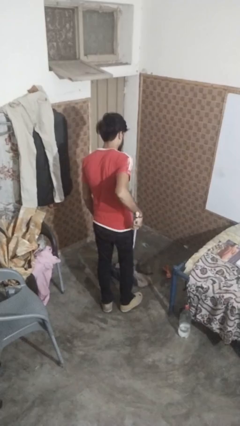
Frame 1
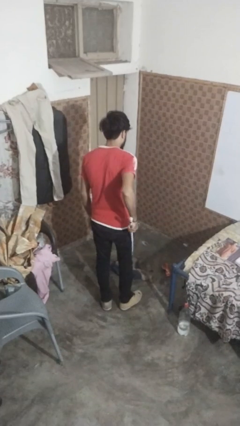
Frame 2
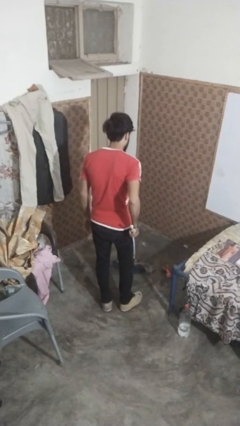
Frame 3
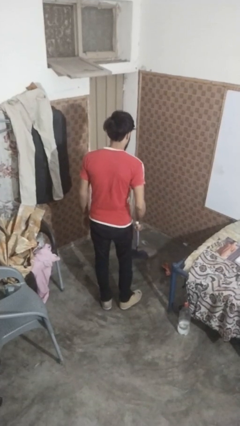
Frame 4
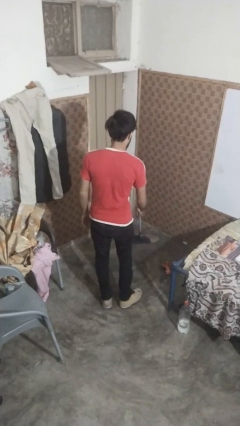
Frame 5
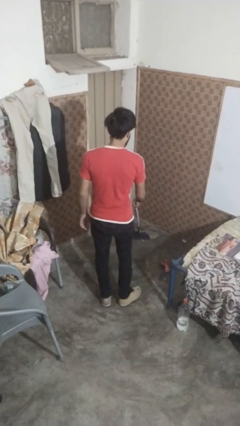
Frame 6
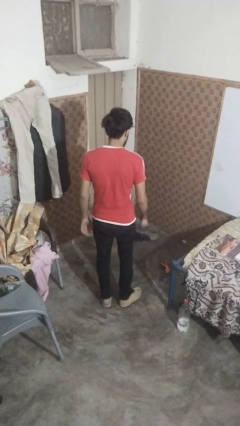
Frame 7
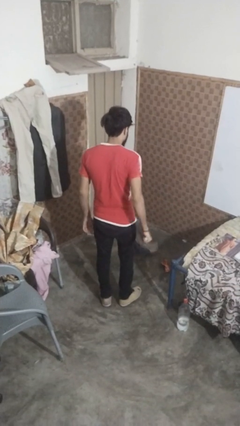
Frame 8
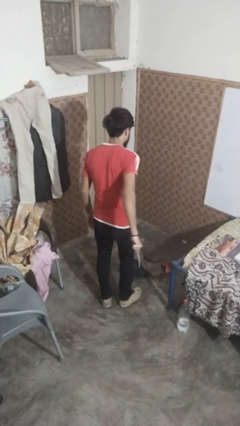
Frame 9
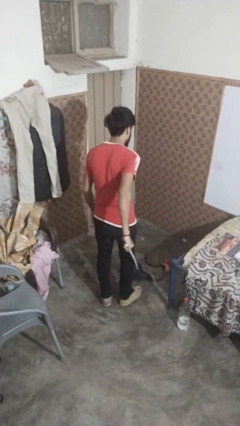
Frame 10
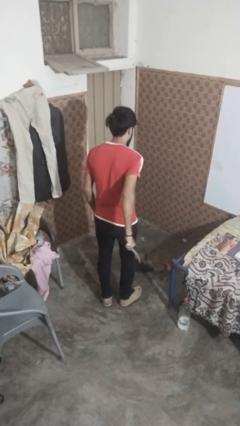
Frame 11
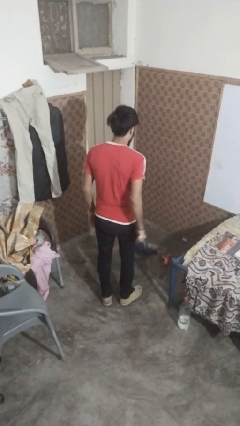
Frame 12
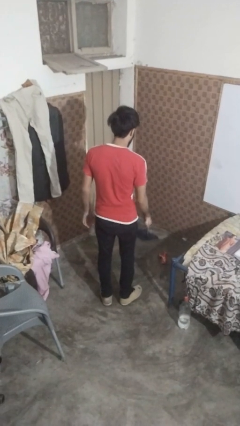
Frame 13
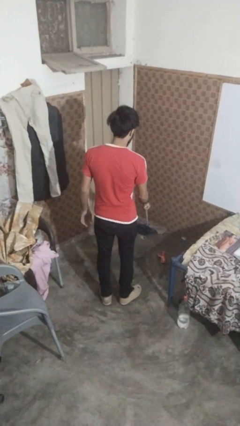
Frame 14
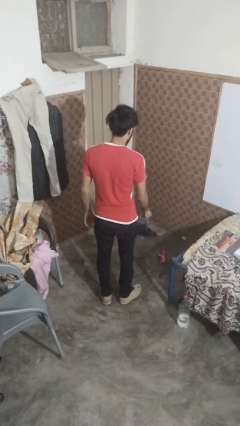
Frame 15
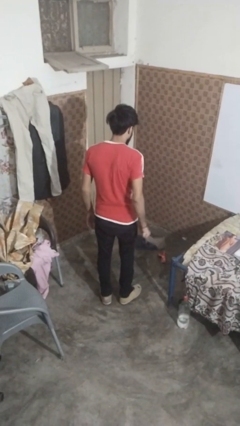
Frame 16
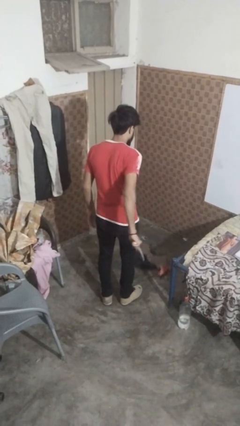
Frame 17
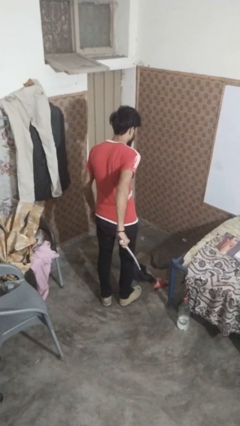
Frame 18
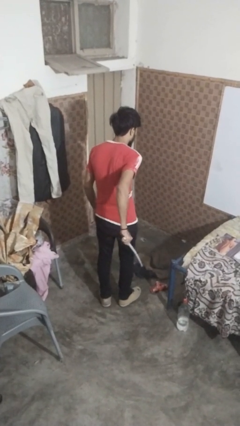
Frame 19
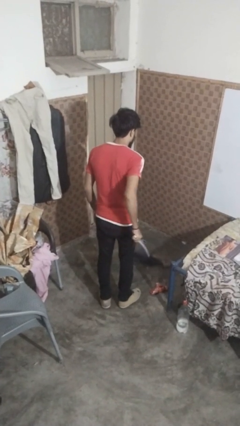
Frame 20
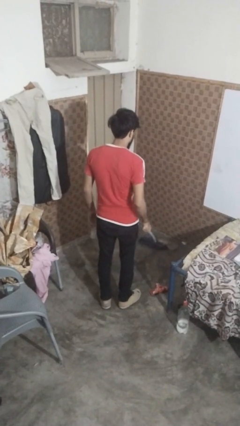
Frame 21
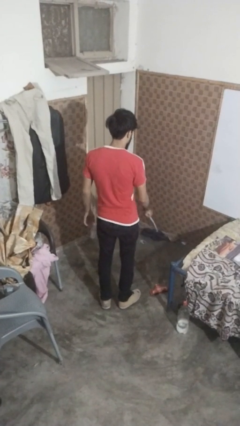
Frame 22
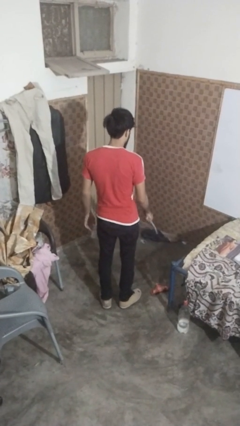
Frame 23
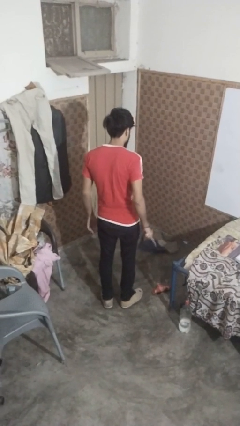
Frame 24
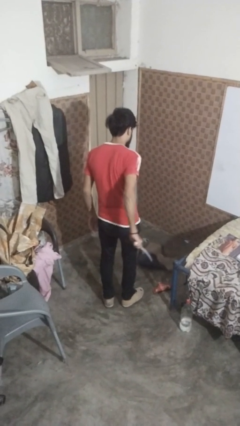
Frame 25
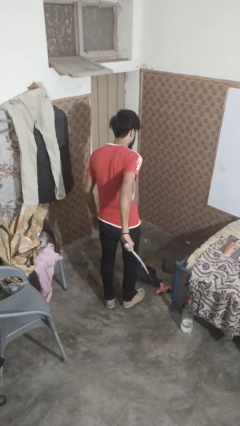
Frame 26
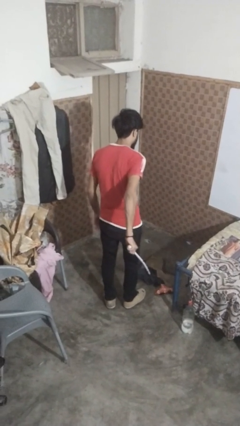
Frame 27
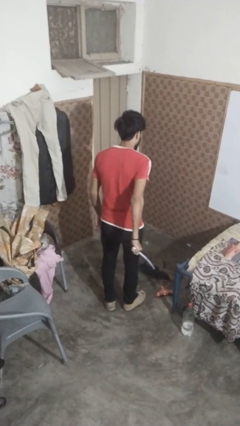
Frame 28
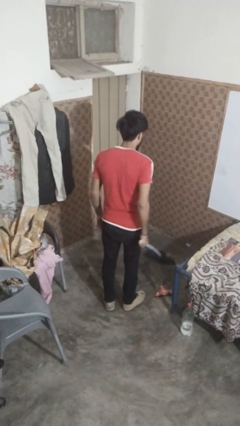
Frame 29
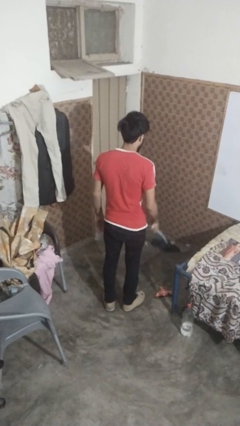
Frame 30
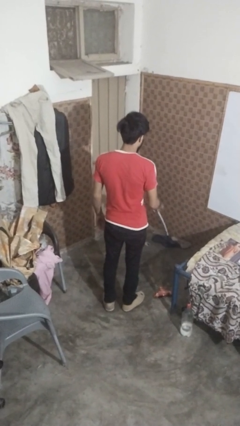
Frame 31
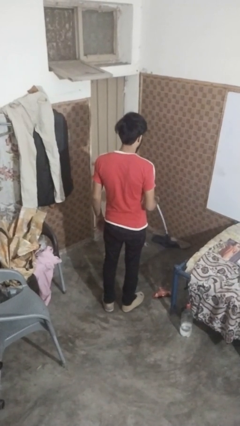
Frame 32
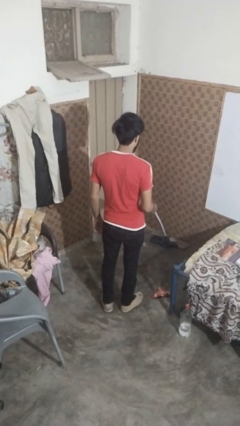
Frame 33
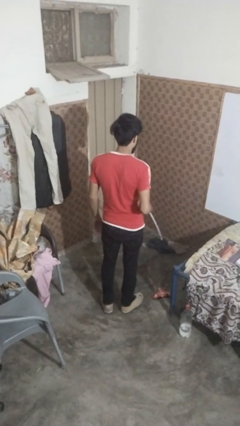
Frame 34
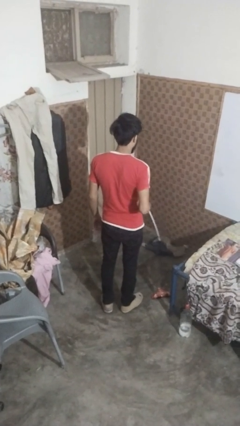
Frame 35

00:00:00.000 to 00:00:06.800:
person mops

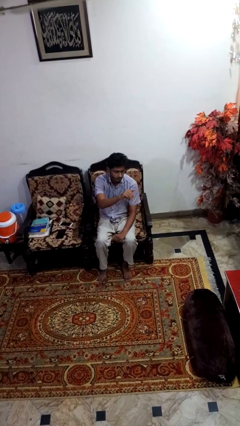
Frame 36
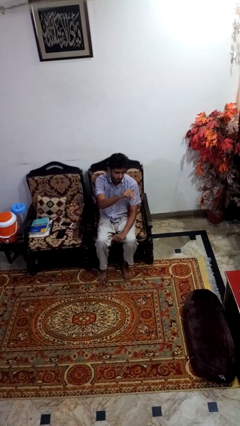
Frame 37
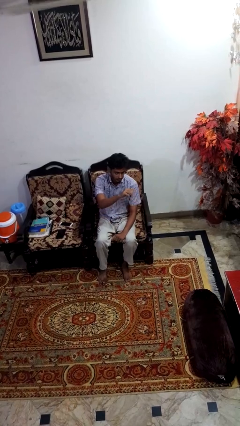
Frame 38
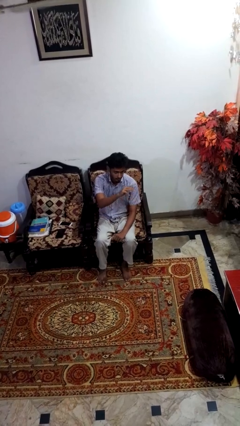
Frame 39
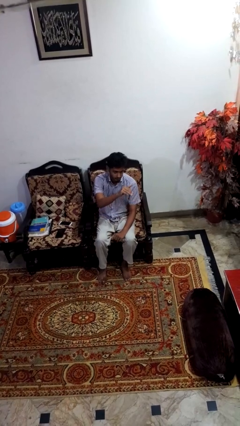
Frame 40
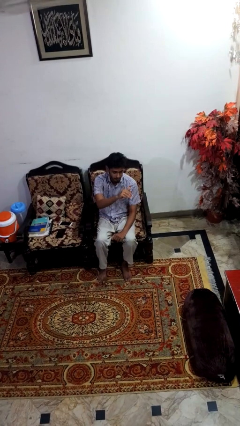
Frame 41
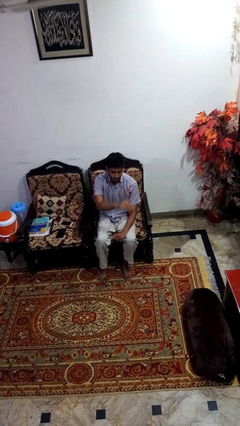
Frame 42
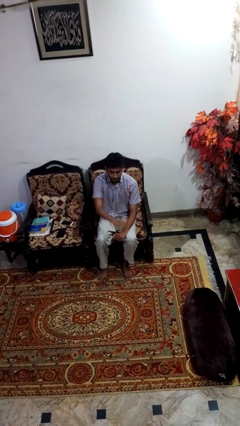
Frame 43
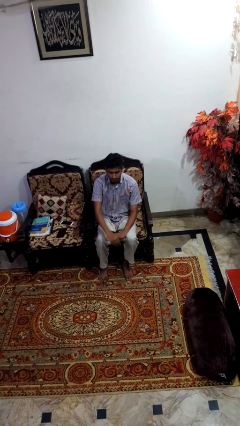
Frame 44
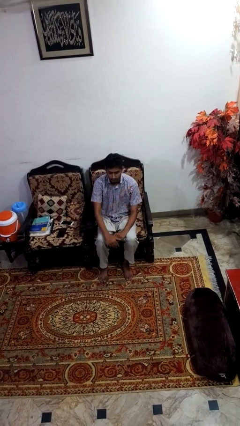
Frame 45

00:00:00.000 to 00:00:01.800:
person gestures come here

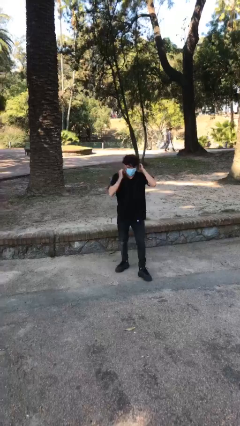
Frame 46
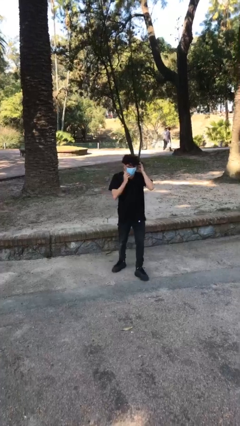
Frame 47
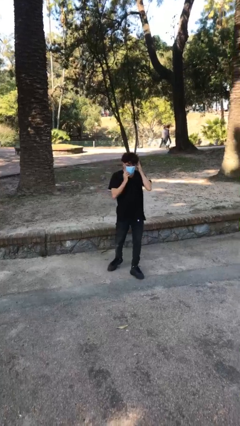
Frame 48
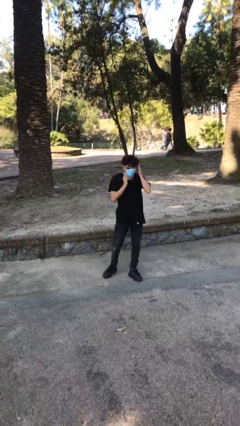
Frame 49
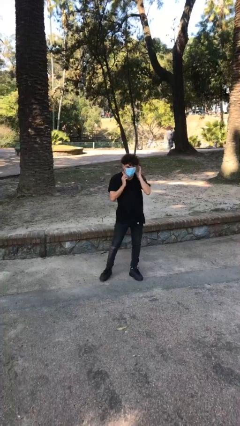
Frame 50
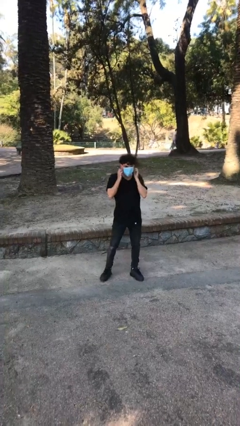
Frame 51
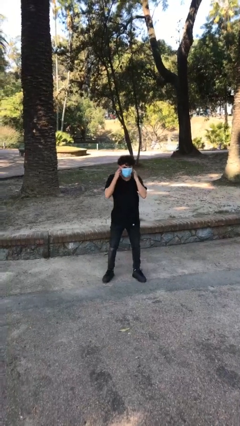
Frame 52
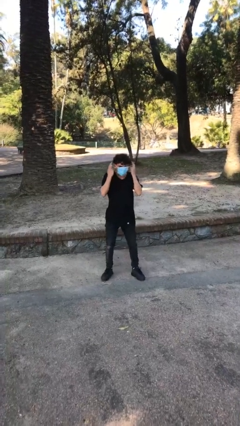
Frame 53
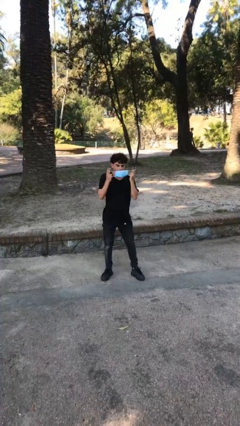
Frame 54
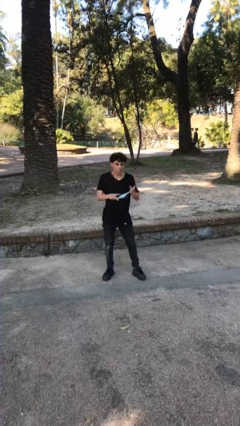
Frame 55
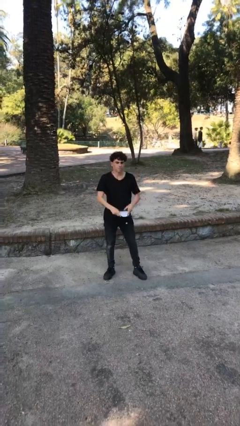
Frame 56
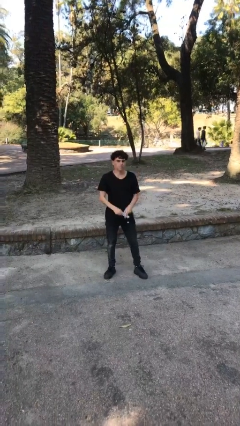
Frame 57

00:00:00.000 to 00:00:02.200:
person takes off facemask

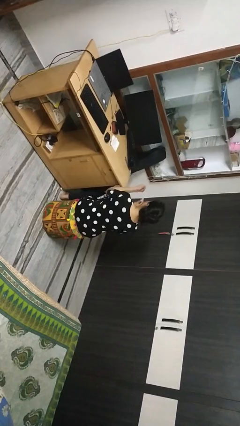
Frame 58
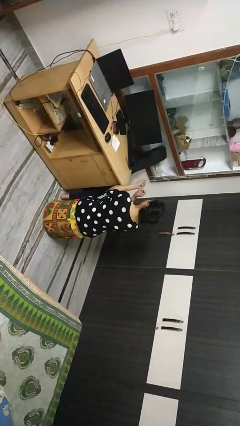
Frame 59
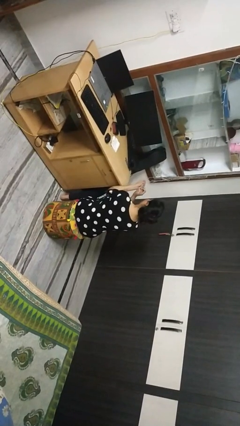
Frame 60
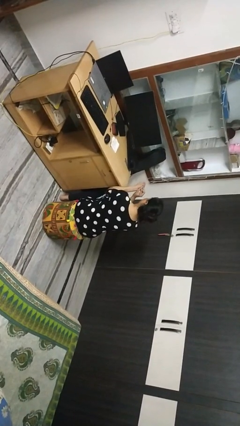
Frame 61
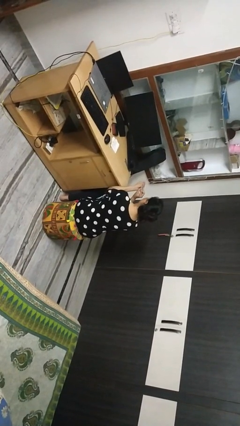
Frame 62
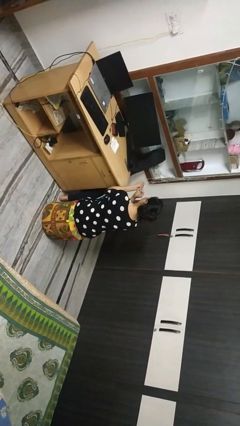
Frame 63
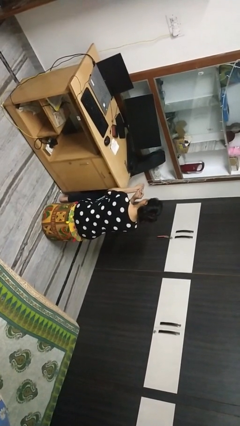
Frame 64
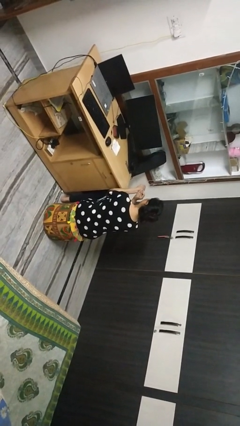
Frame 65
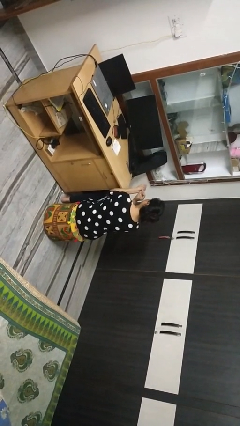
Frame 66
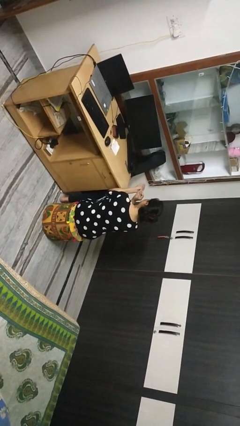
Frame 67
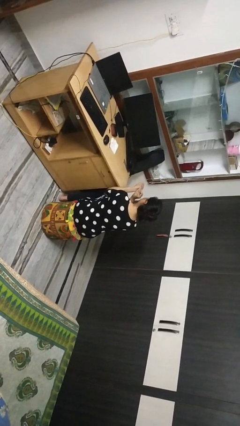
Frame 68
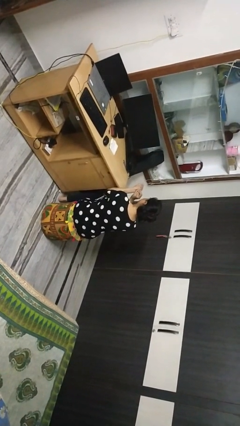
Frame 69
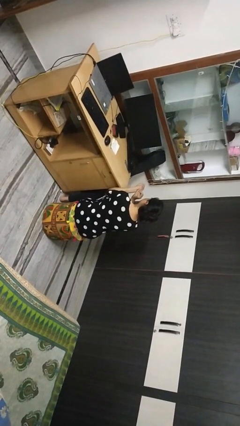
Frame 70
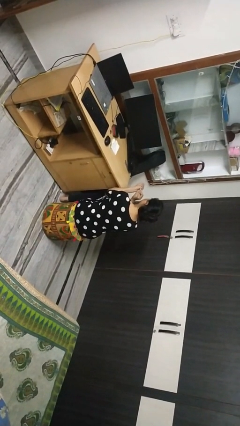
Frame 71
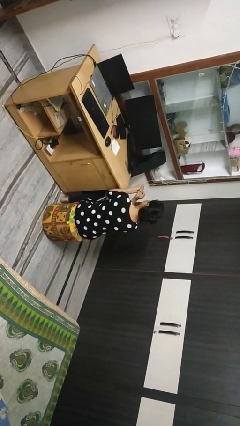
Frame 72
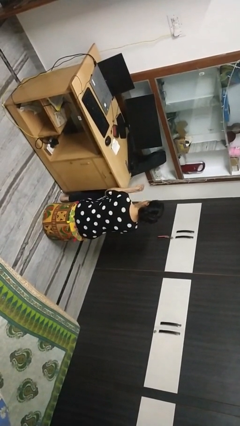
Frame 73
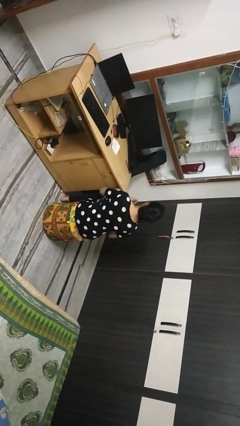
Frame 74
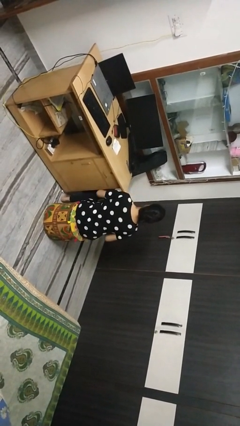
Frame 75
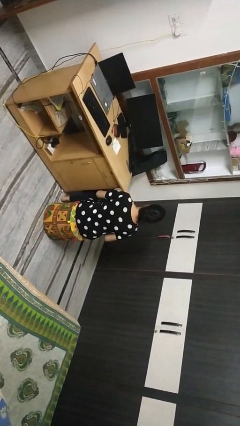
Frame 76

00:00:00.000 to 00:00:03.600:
person files fingernails

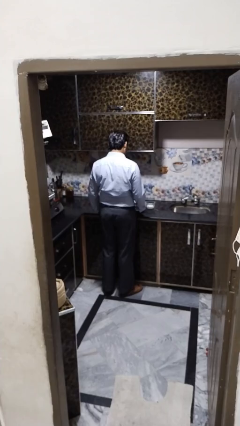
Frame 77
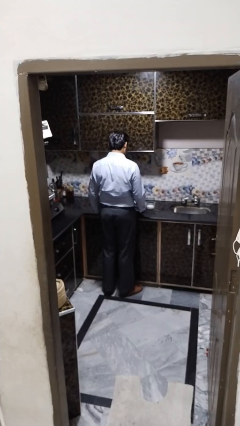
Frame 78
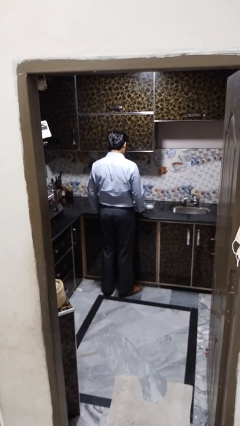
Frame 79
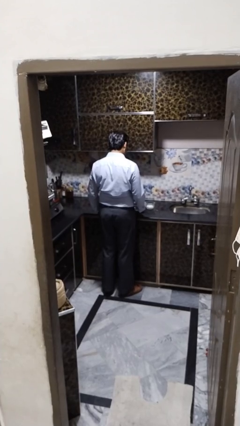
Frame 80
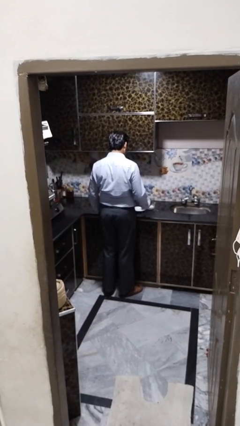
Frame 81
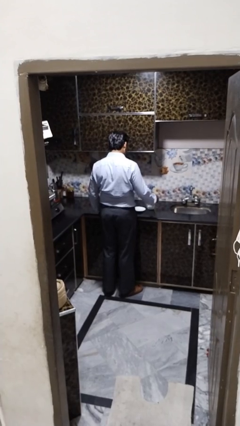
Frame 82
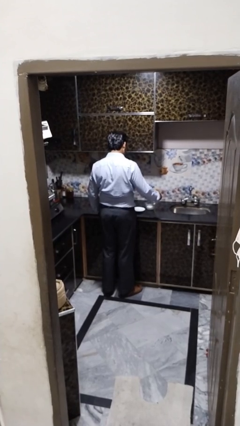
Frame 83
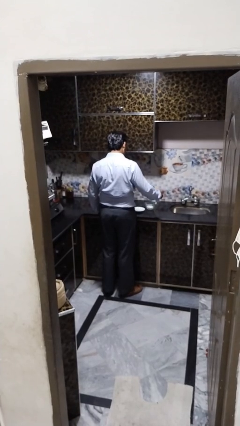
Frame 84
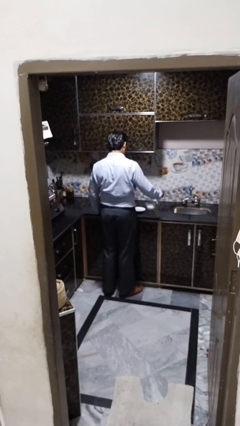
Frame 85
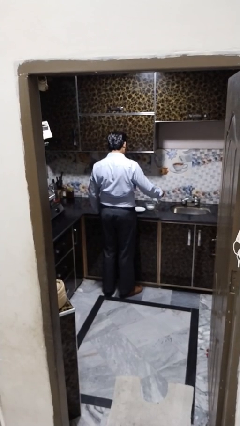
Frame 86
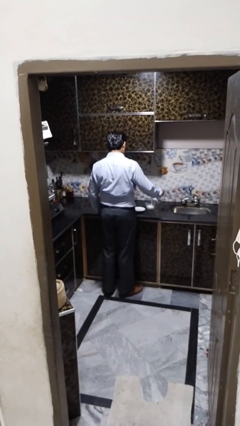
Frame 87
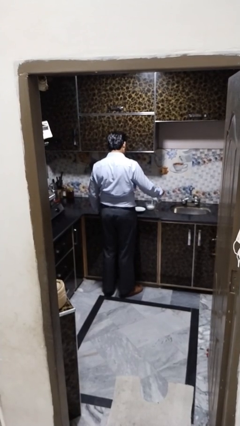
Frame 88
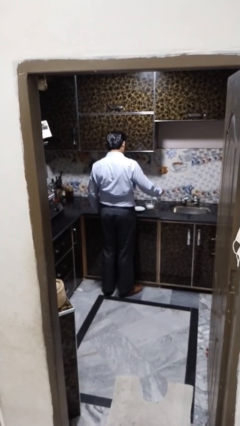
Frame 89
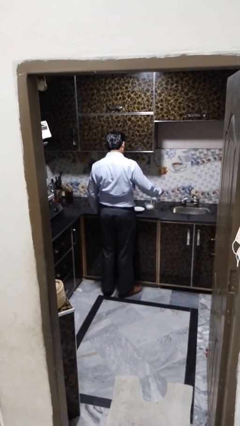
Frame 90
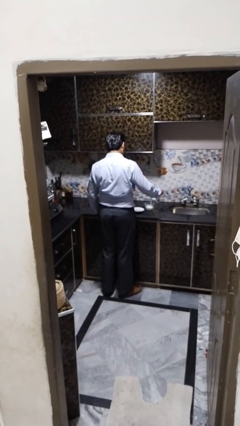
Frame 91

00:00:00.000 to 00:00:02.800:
person pours into bowl

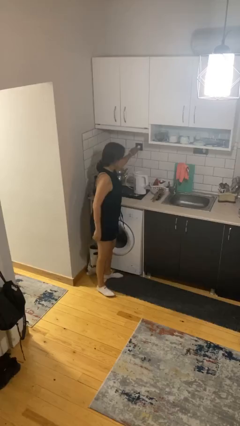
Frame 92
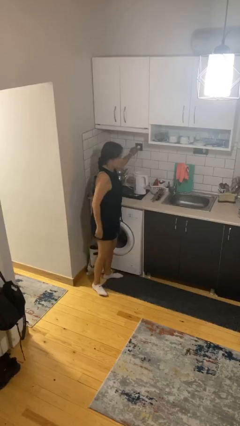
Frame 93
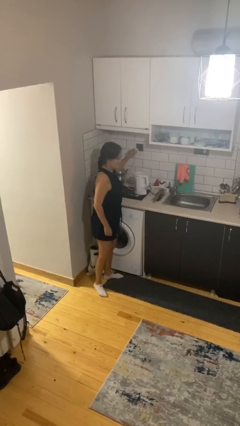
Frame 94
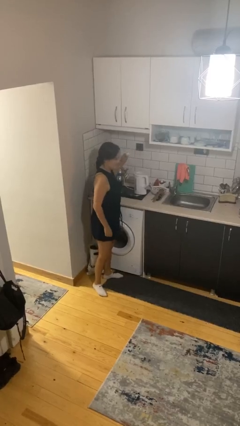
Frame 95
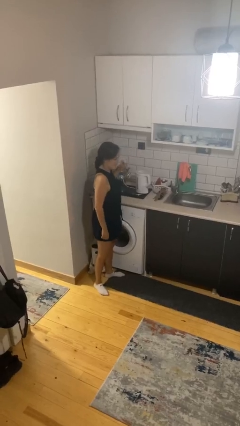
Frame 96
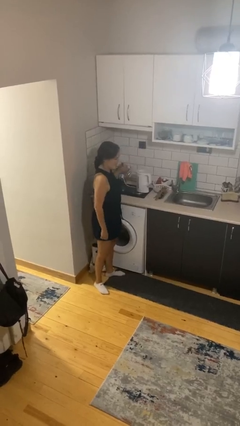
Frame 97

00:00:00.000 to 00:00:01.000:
person unplugs from electrical socket
